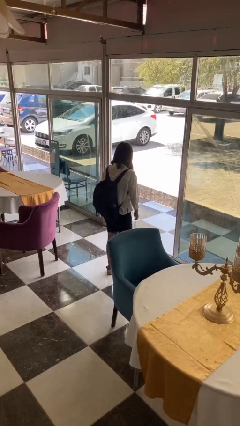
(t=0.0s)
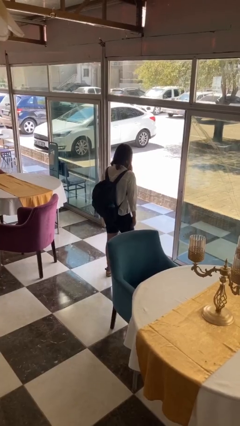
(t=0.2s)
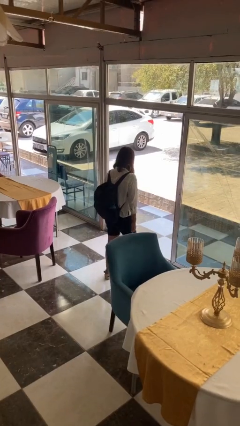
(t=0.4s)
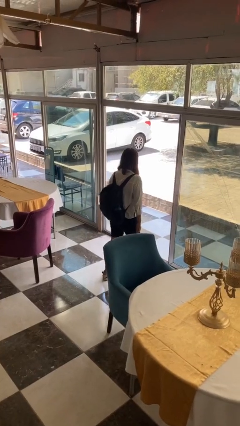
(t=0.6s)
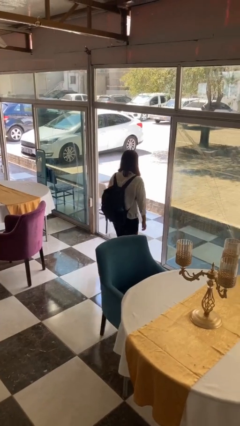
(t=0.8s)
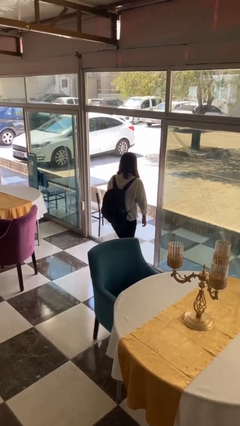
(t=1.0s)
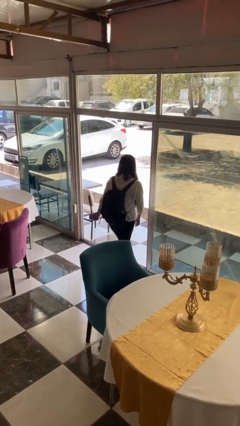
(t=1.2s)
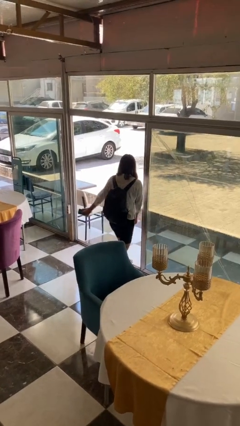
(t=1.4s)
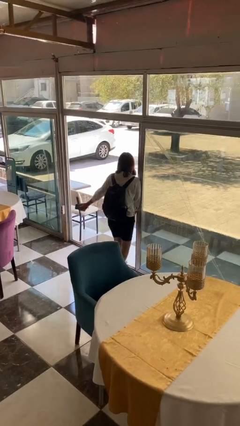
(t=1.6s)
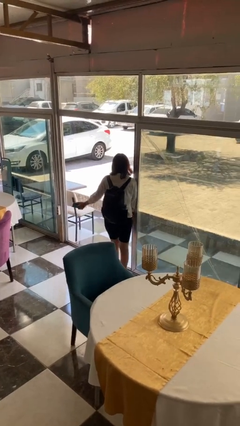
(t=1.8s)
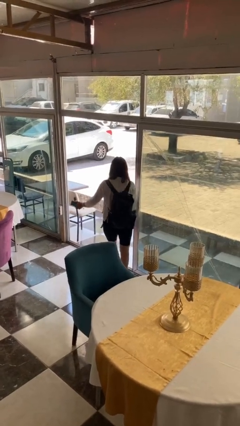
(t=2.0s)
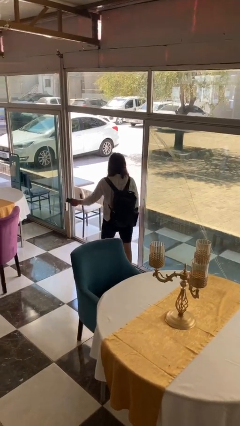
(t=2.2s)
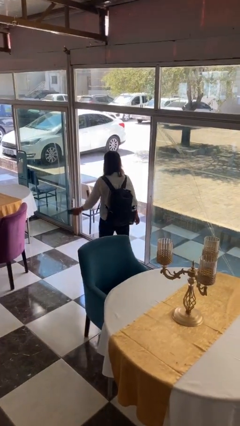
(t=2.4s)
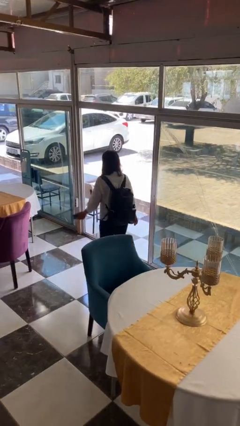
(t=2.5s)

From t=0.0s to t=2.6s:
person bumps into wall

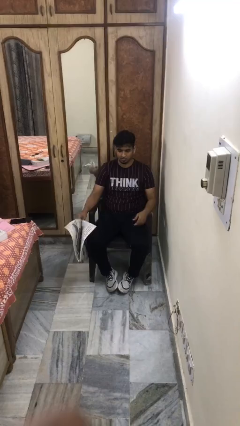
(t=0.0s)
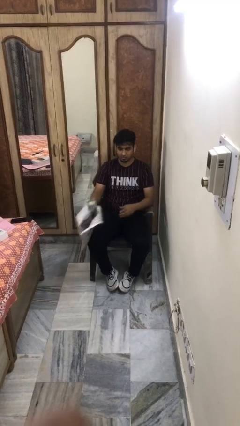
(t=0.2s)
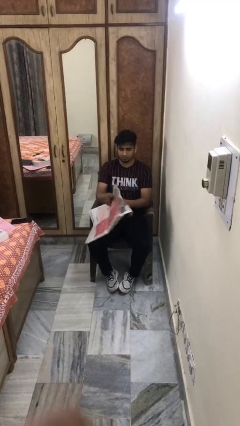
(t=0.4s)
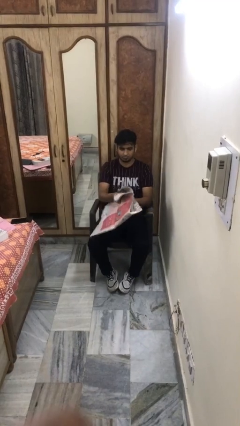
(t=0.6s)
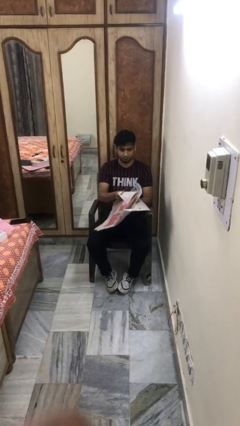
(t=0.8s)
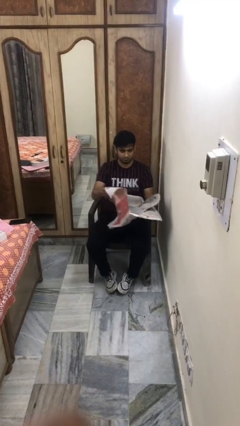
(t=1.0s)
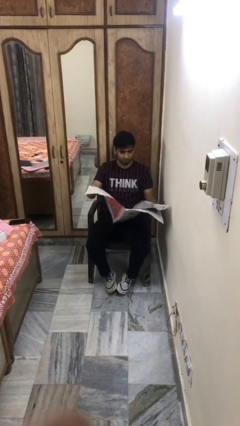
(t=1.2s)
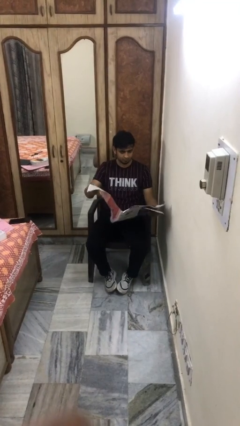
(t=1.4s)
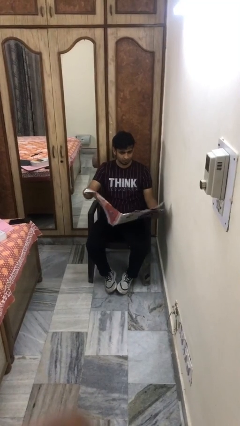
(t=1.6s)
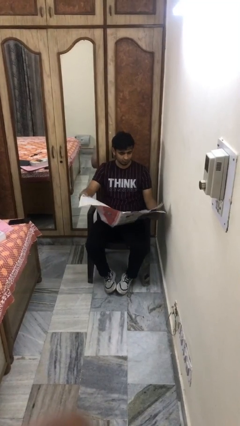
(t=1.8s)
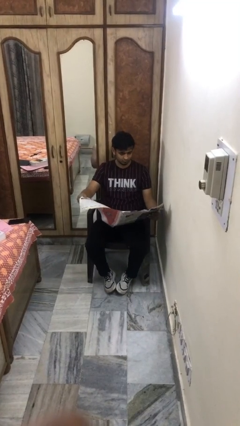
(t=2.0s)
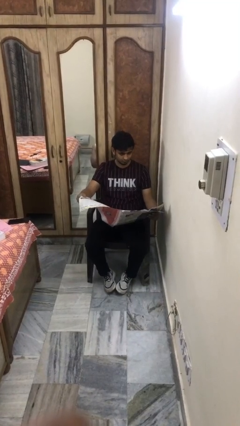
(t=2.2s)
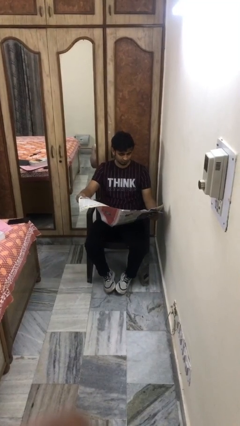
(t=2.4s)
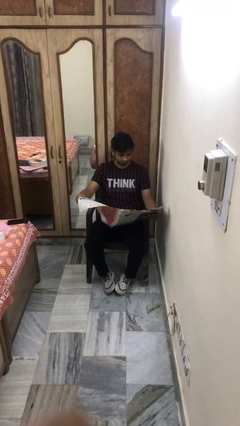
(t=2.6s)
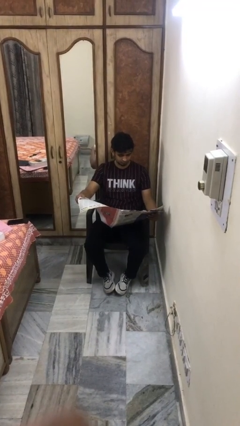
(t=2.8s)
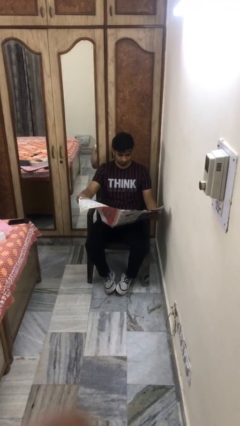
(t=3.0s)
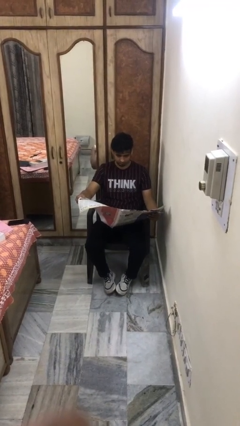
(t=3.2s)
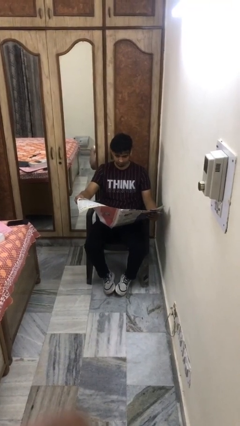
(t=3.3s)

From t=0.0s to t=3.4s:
person reads newspaper

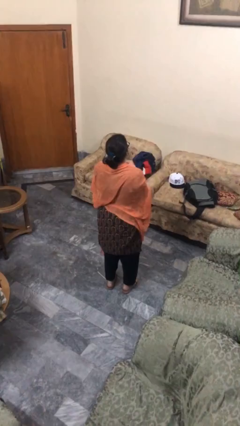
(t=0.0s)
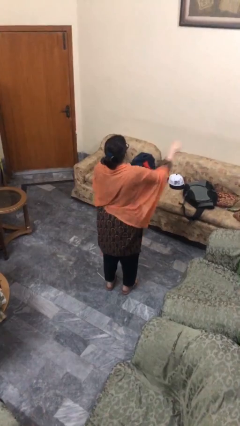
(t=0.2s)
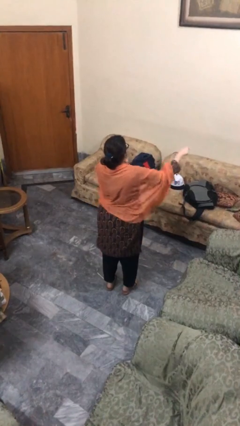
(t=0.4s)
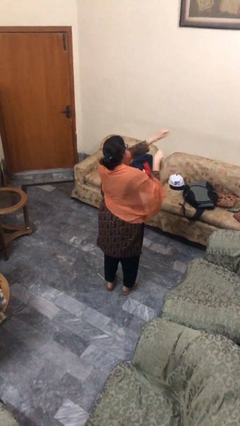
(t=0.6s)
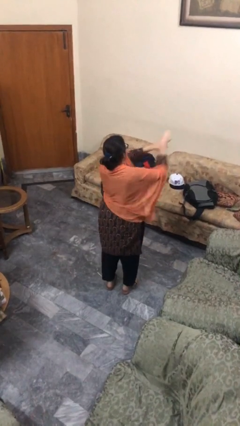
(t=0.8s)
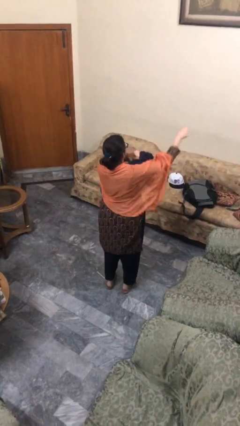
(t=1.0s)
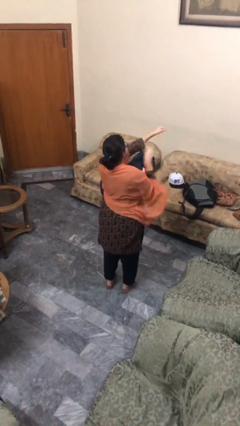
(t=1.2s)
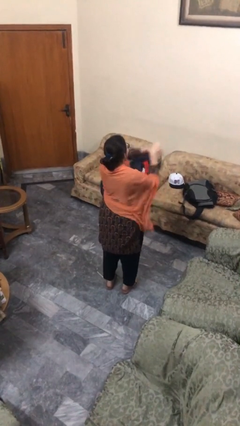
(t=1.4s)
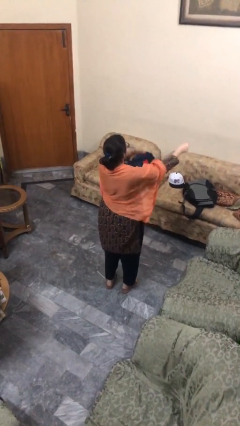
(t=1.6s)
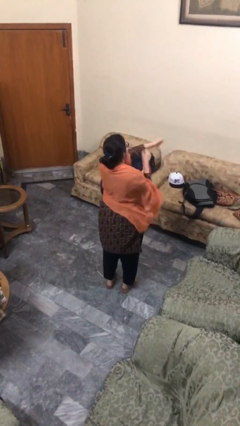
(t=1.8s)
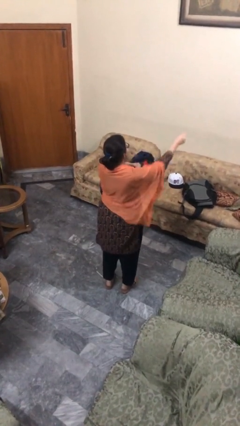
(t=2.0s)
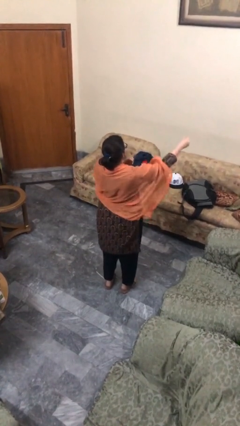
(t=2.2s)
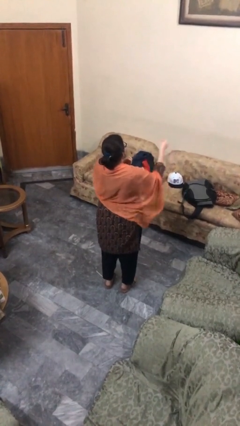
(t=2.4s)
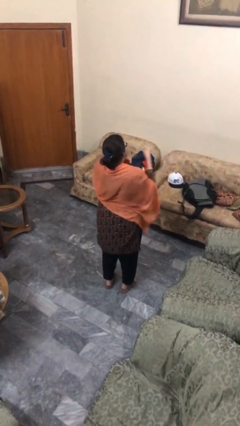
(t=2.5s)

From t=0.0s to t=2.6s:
person punches

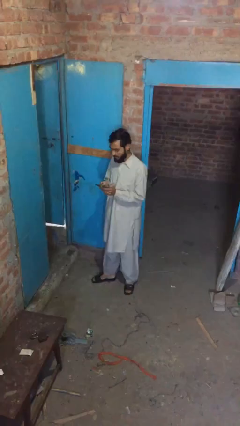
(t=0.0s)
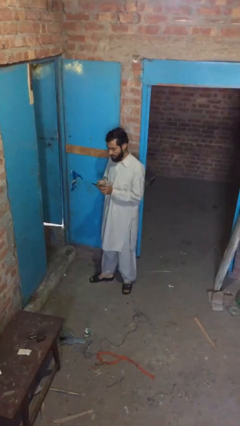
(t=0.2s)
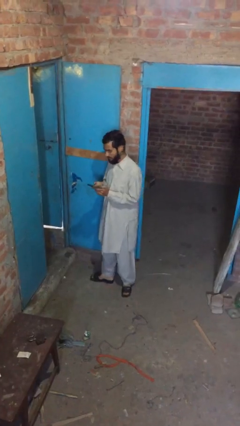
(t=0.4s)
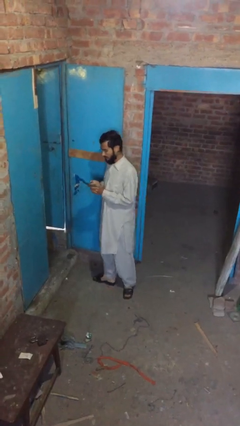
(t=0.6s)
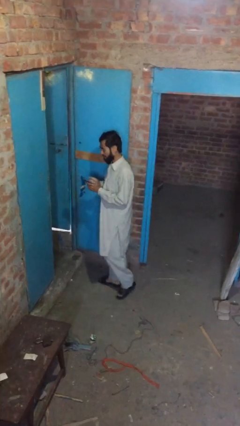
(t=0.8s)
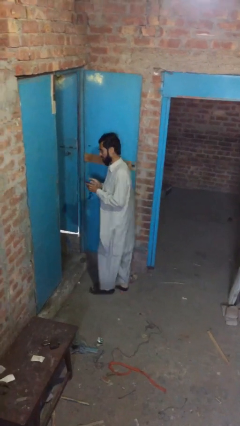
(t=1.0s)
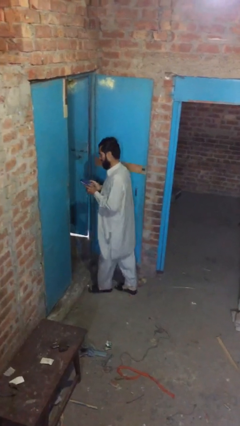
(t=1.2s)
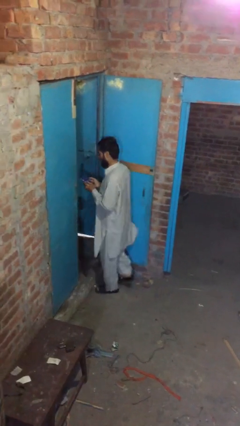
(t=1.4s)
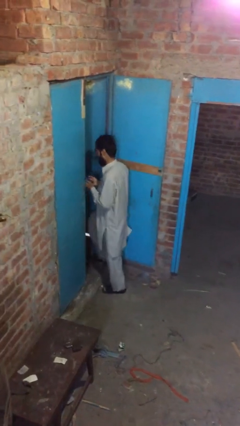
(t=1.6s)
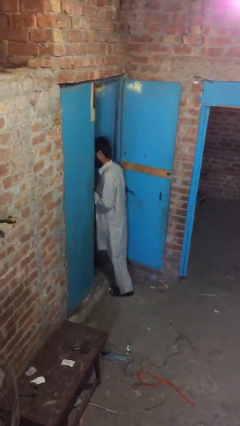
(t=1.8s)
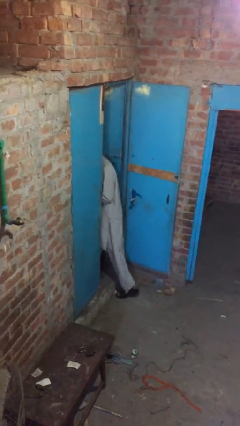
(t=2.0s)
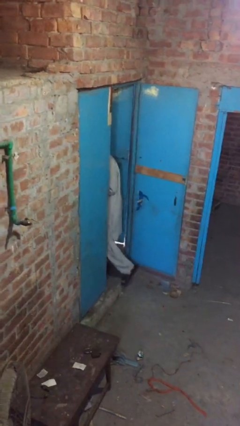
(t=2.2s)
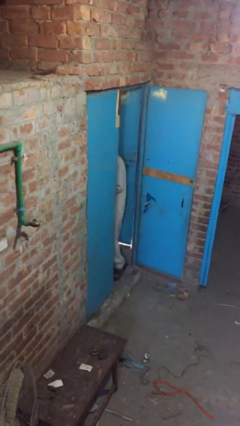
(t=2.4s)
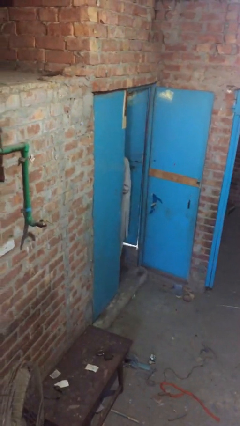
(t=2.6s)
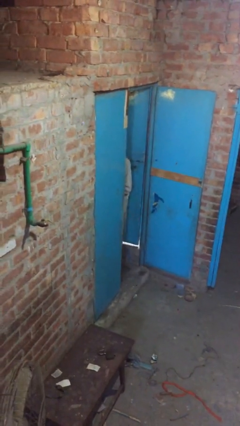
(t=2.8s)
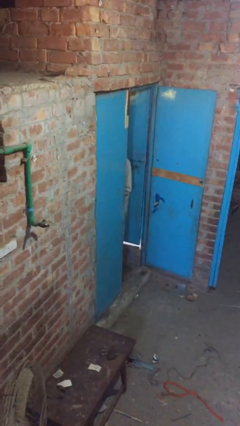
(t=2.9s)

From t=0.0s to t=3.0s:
person exits scene through structure

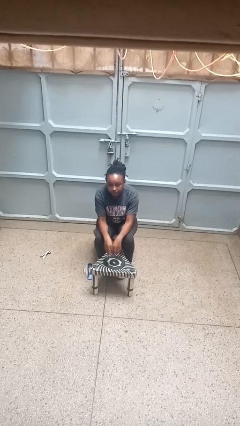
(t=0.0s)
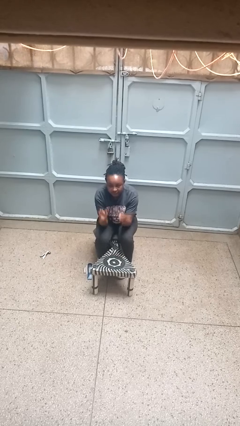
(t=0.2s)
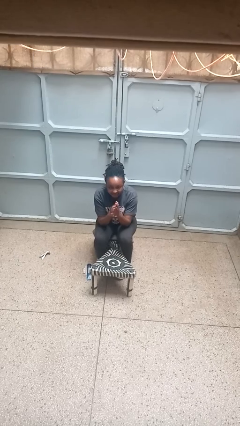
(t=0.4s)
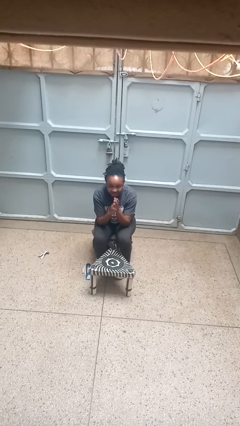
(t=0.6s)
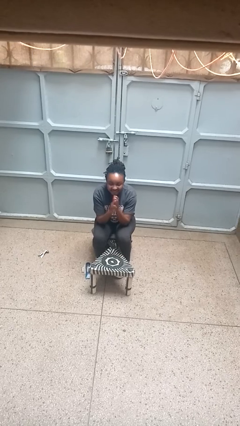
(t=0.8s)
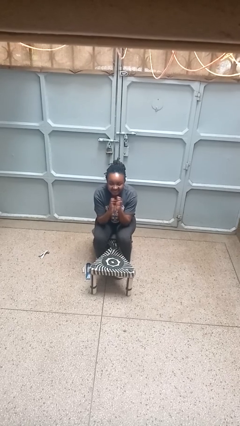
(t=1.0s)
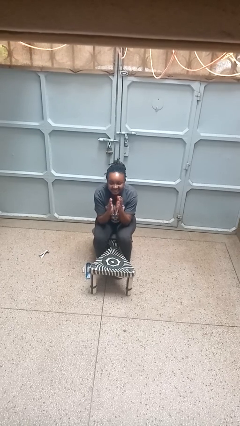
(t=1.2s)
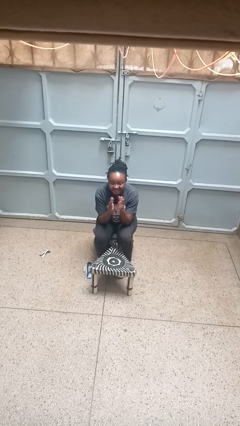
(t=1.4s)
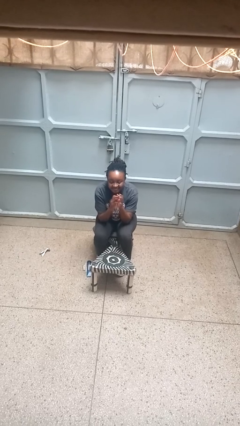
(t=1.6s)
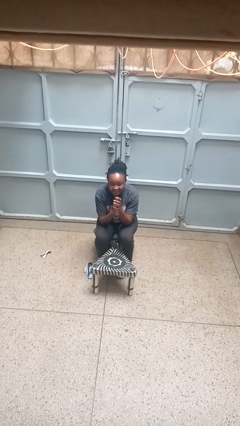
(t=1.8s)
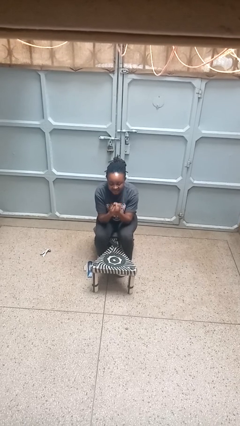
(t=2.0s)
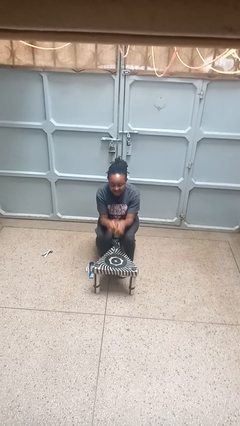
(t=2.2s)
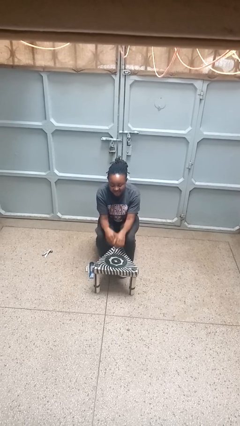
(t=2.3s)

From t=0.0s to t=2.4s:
person claps hands

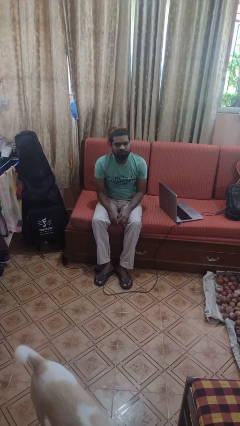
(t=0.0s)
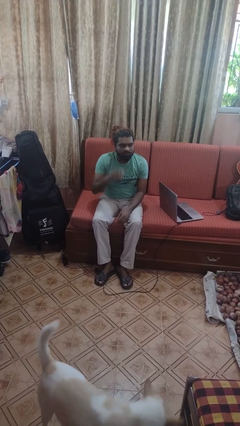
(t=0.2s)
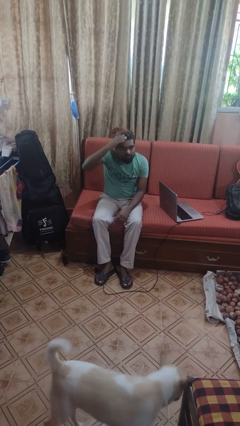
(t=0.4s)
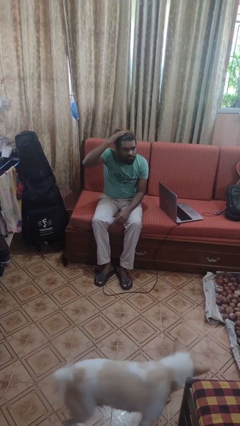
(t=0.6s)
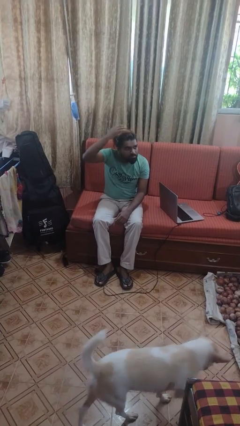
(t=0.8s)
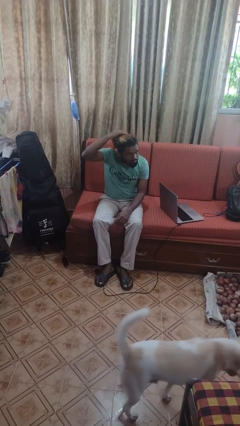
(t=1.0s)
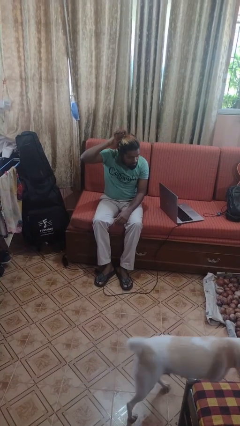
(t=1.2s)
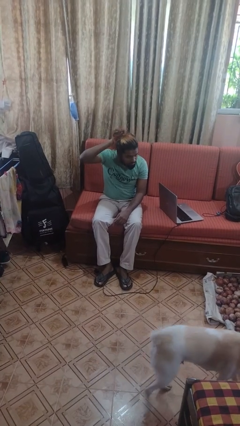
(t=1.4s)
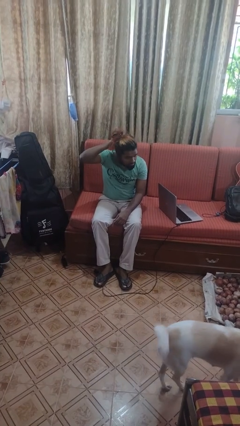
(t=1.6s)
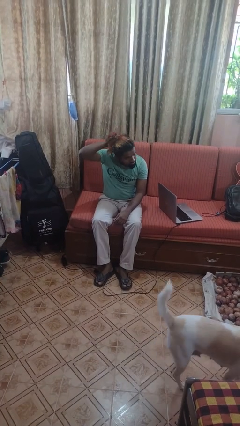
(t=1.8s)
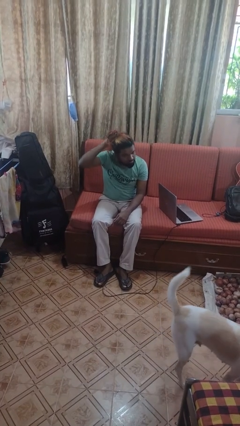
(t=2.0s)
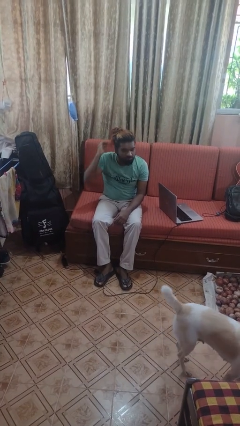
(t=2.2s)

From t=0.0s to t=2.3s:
person strokes hair

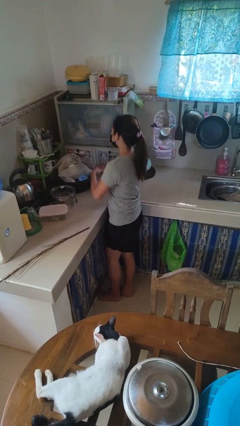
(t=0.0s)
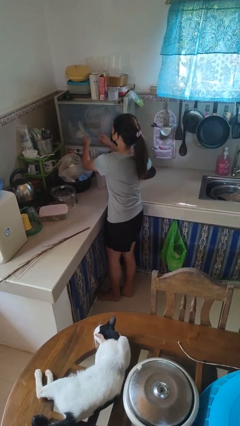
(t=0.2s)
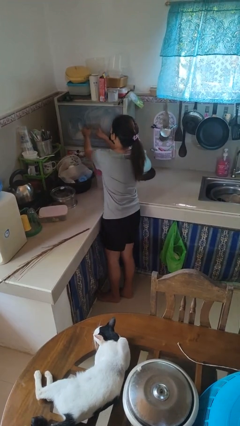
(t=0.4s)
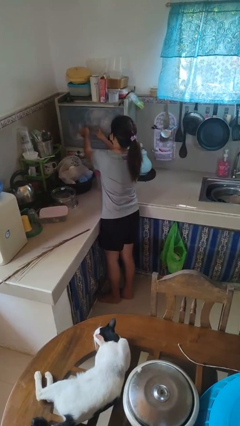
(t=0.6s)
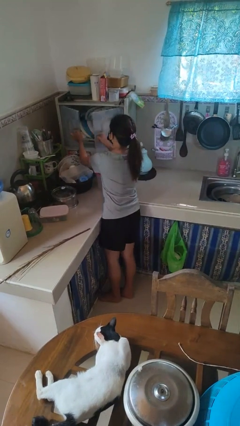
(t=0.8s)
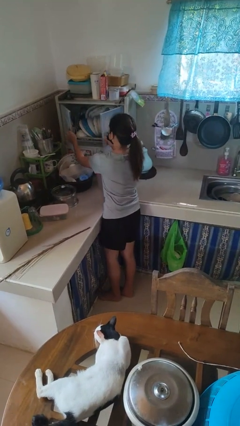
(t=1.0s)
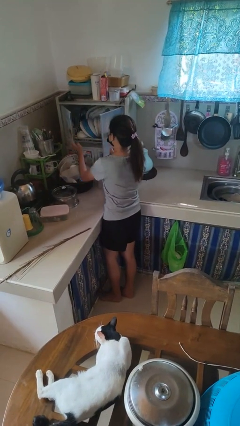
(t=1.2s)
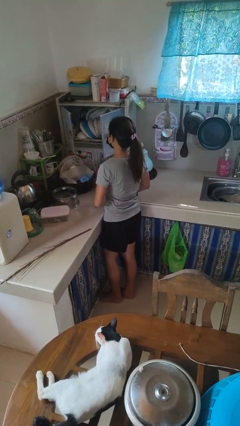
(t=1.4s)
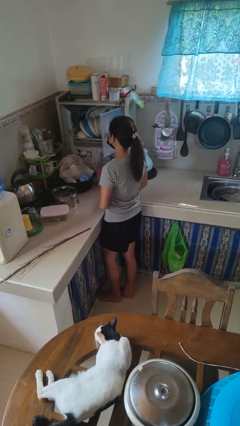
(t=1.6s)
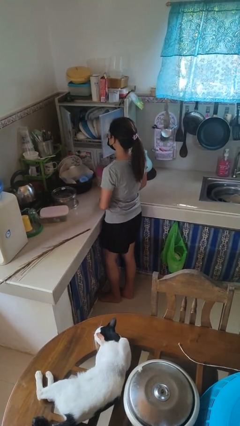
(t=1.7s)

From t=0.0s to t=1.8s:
person opens kitchen drawer
